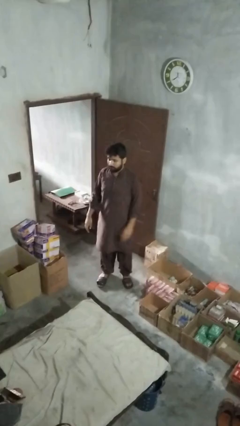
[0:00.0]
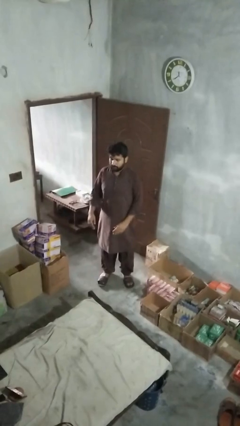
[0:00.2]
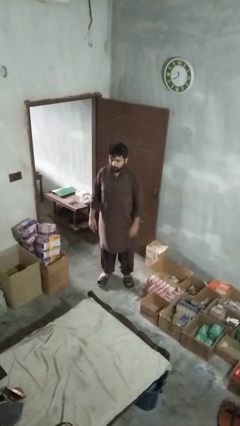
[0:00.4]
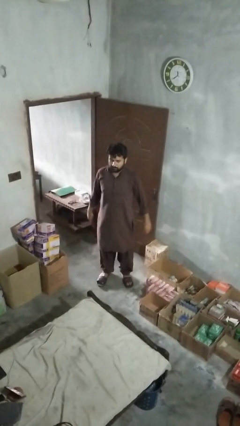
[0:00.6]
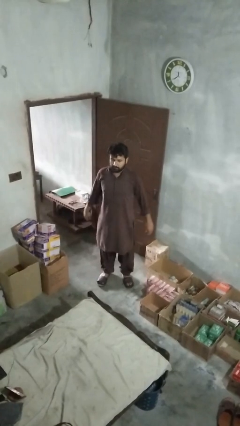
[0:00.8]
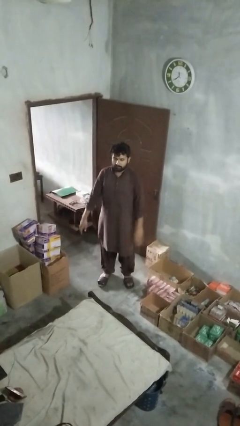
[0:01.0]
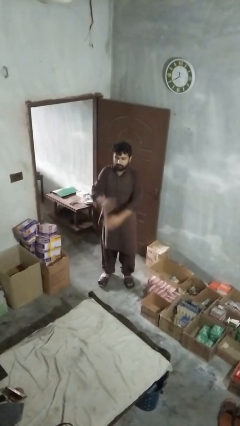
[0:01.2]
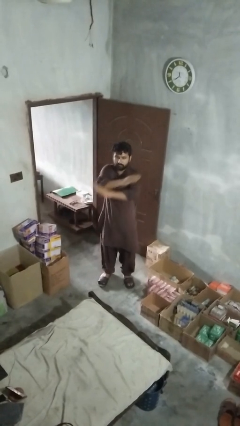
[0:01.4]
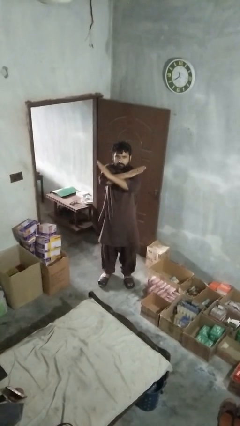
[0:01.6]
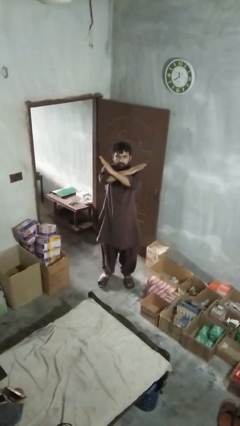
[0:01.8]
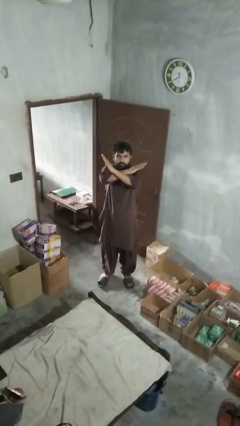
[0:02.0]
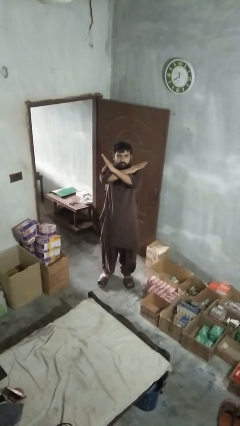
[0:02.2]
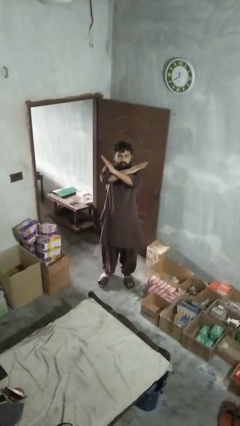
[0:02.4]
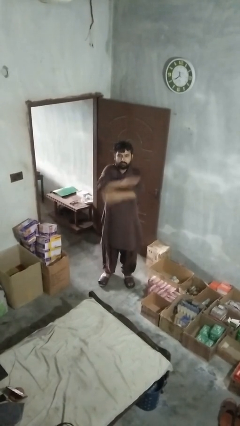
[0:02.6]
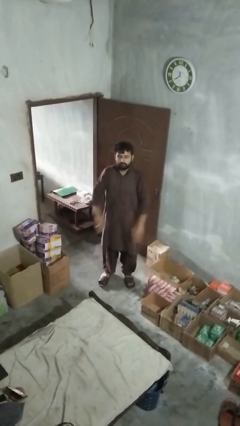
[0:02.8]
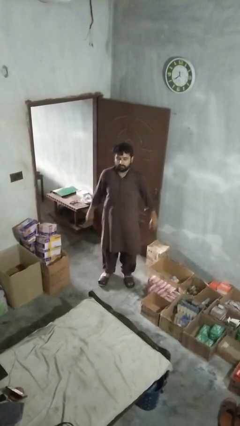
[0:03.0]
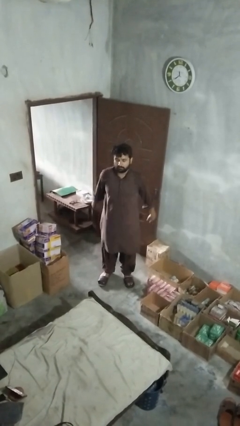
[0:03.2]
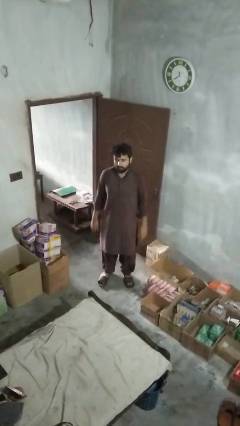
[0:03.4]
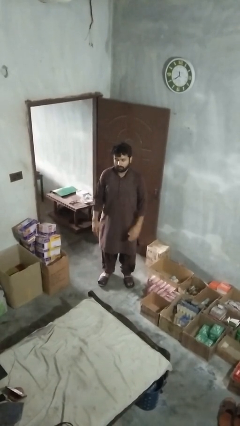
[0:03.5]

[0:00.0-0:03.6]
person gestures arms x

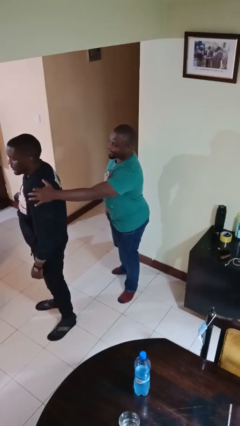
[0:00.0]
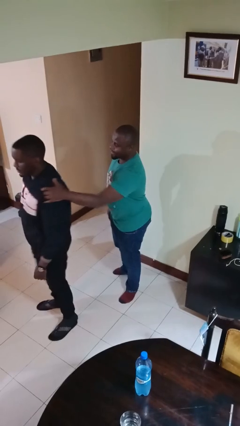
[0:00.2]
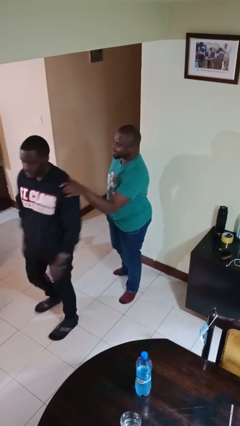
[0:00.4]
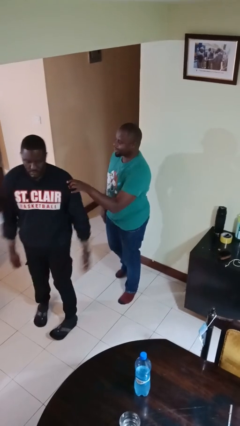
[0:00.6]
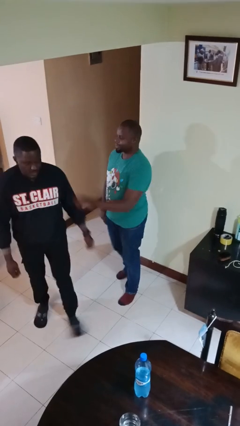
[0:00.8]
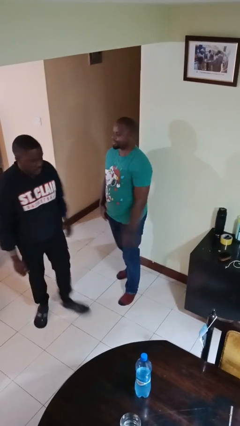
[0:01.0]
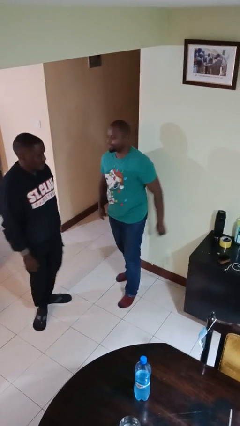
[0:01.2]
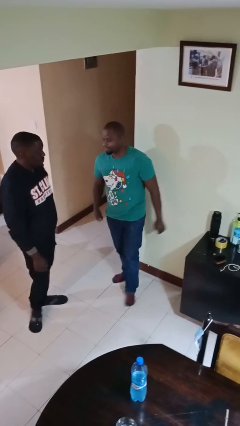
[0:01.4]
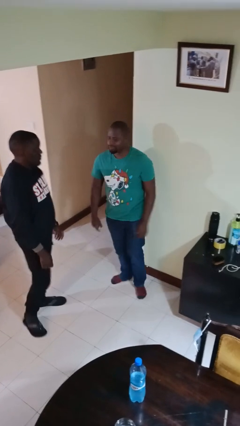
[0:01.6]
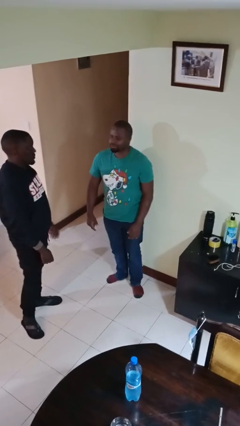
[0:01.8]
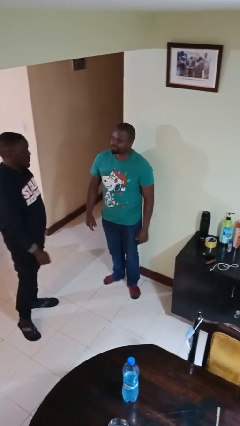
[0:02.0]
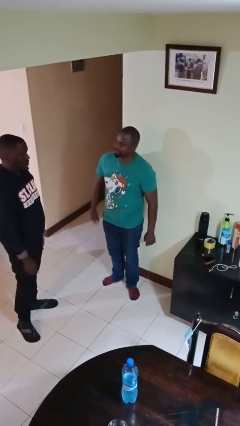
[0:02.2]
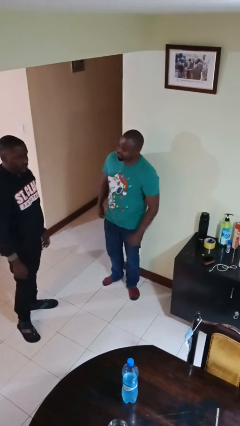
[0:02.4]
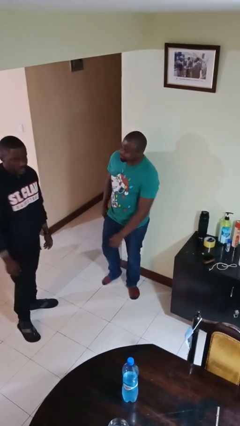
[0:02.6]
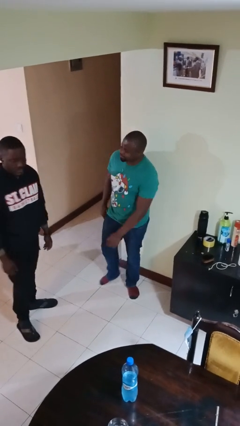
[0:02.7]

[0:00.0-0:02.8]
person spins person around

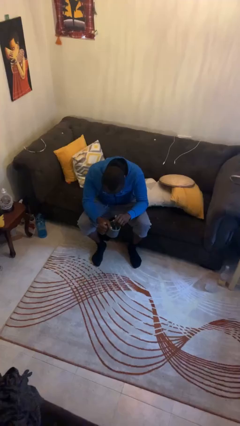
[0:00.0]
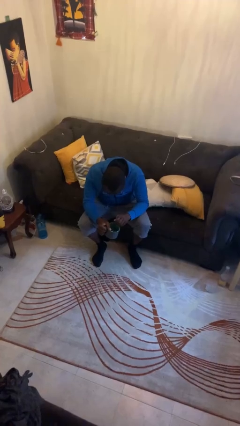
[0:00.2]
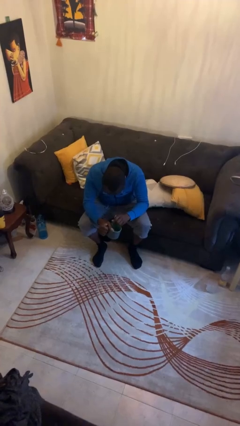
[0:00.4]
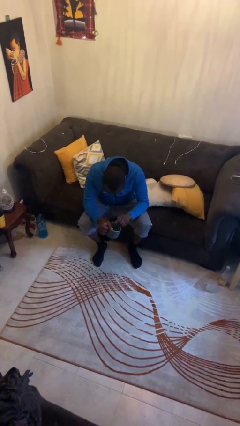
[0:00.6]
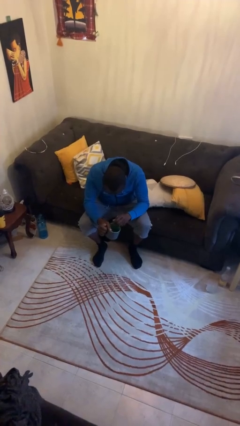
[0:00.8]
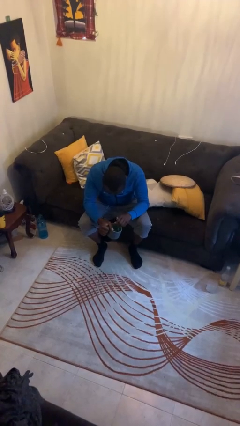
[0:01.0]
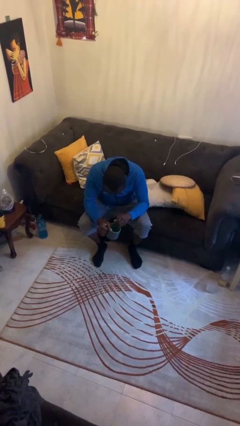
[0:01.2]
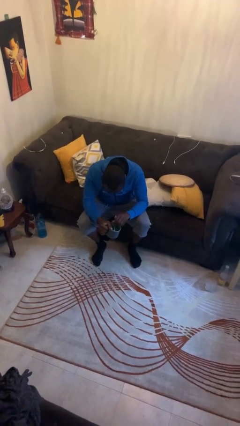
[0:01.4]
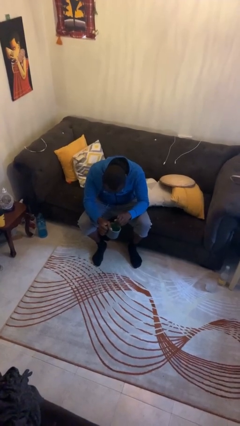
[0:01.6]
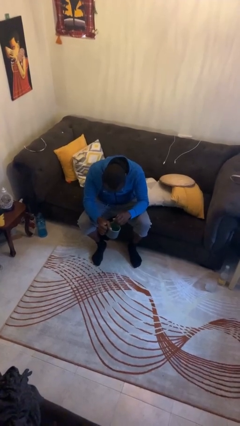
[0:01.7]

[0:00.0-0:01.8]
person stirs mug

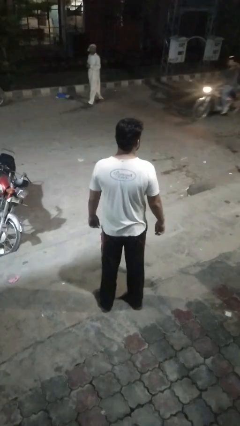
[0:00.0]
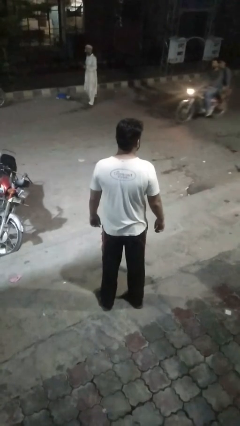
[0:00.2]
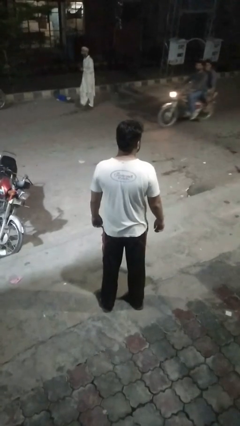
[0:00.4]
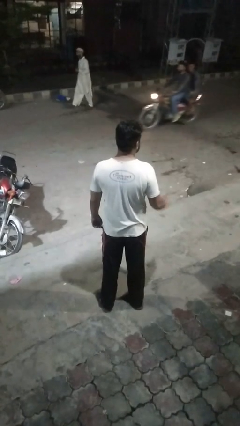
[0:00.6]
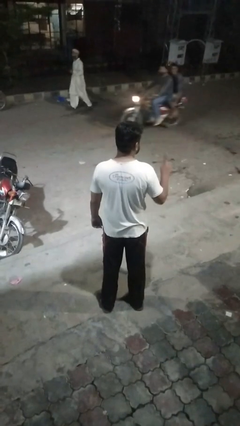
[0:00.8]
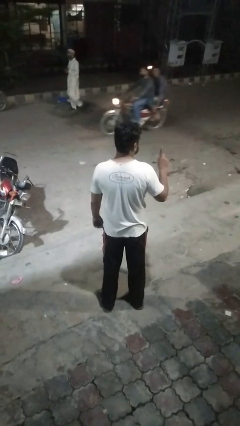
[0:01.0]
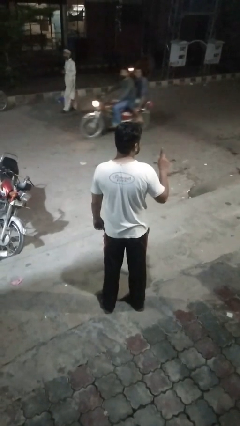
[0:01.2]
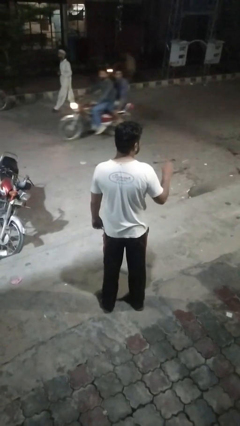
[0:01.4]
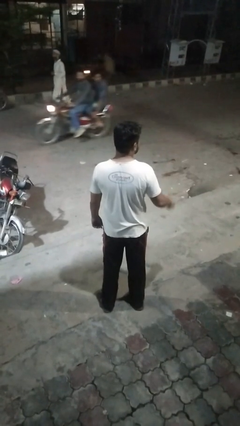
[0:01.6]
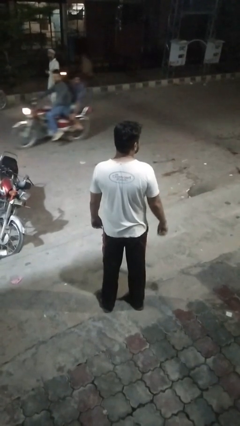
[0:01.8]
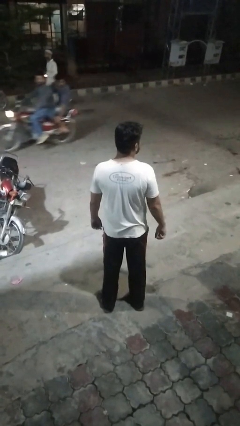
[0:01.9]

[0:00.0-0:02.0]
person gestures number one

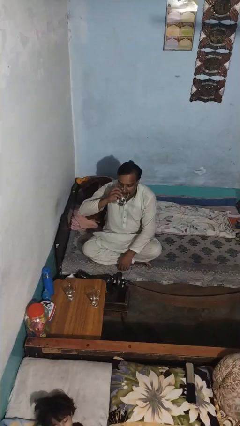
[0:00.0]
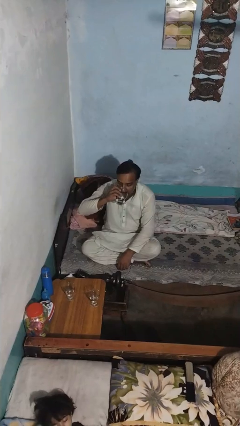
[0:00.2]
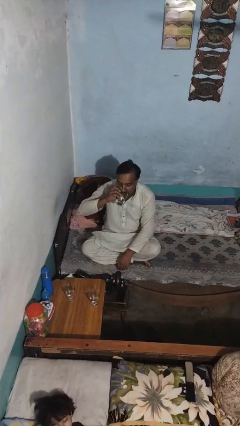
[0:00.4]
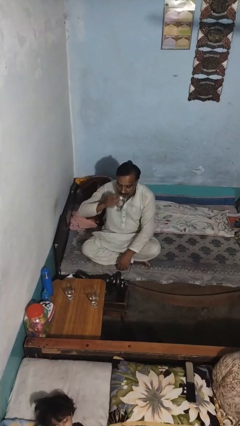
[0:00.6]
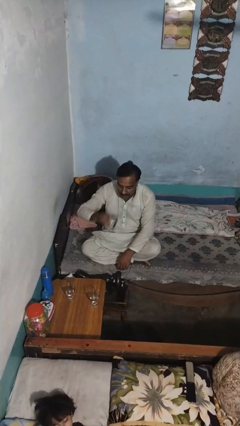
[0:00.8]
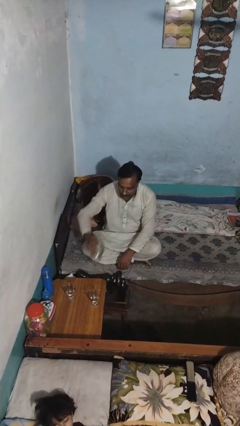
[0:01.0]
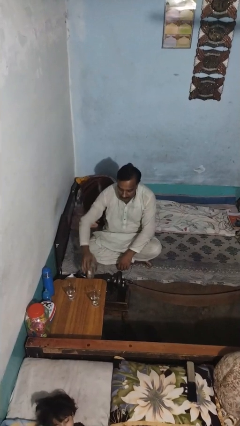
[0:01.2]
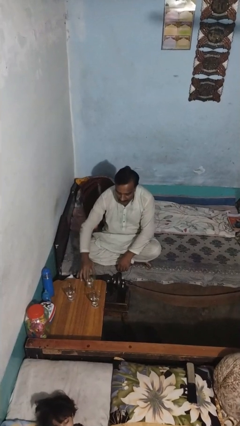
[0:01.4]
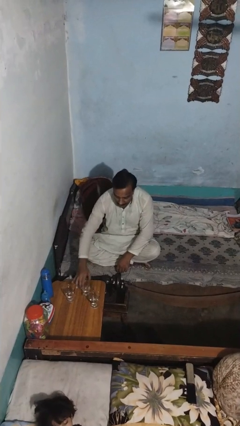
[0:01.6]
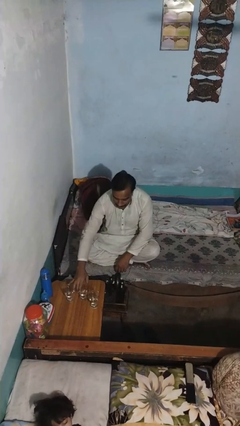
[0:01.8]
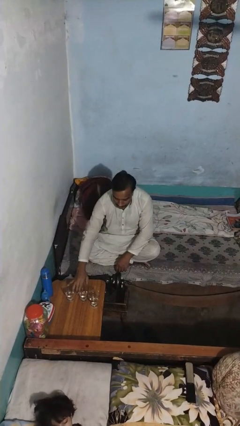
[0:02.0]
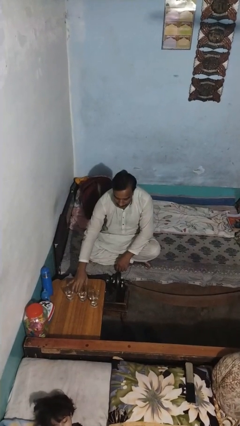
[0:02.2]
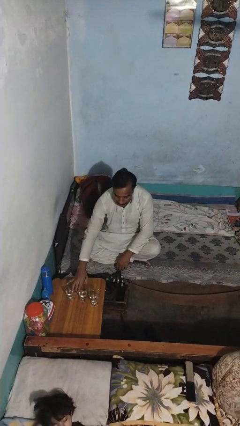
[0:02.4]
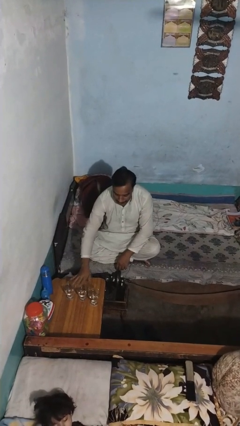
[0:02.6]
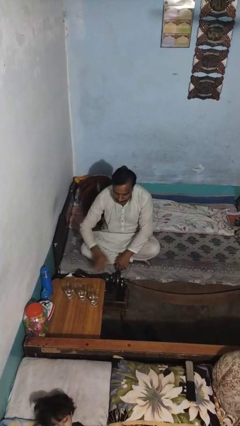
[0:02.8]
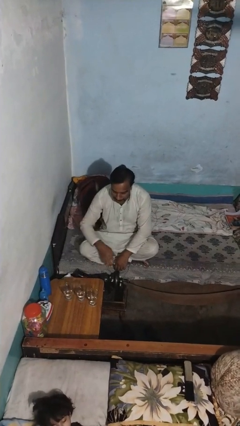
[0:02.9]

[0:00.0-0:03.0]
person puts down object on table

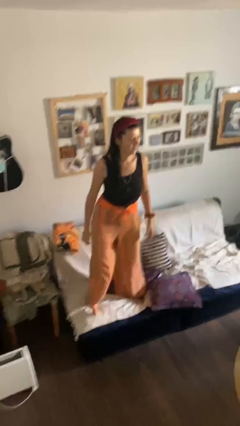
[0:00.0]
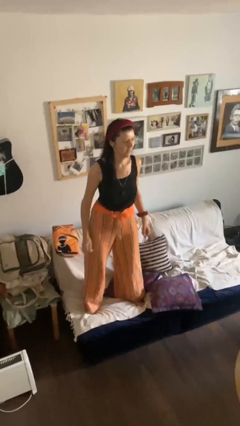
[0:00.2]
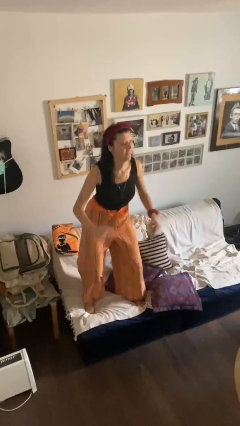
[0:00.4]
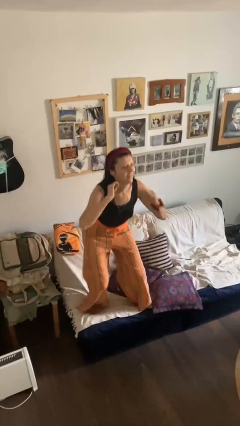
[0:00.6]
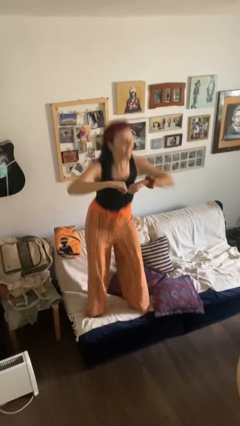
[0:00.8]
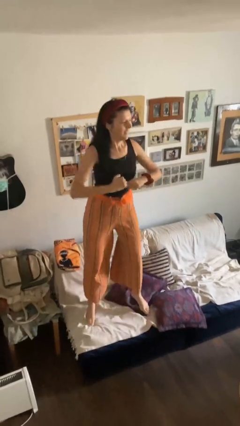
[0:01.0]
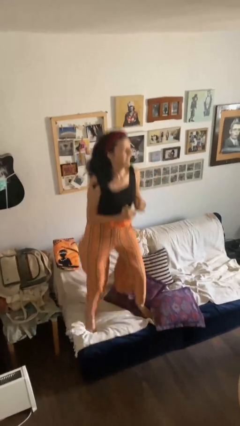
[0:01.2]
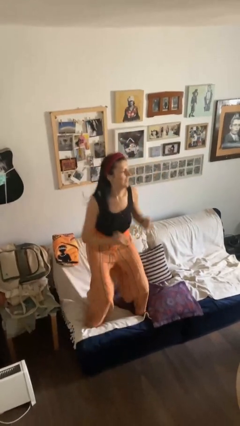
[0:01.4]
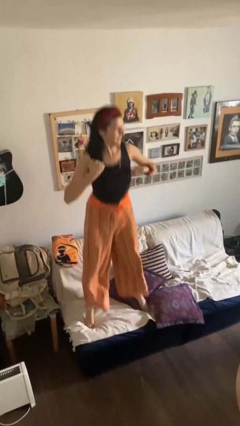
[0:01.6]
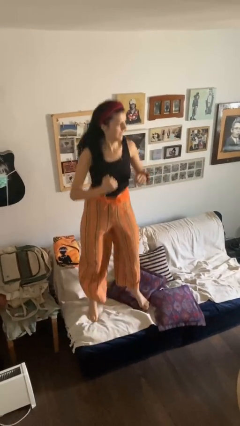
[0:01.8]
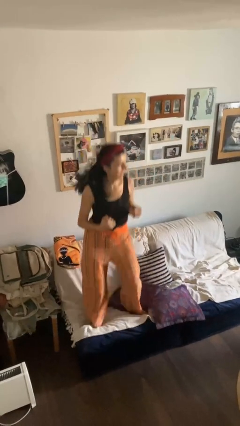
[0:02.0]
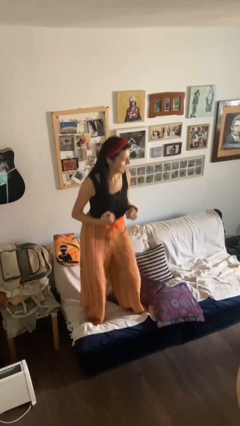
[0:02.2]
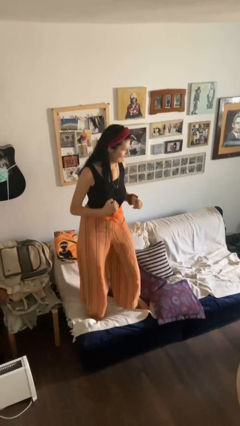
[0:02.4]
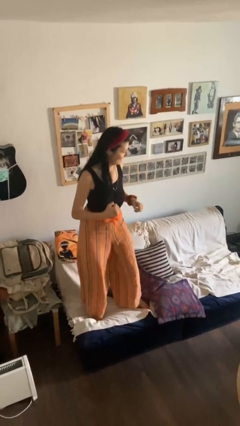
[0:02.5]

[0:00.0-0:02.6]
person jumps on couch

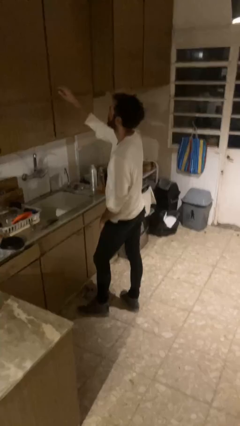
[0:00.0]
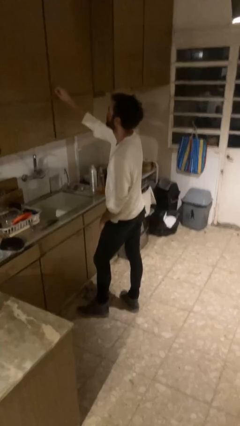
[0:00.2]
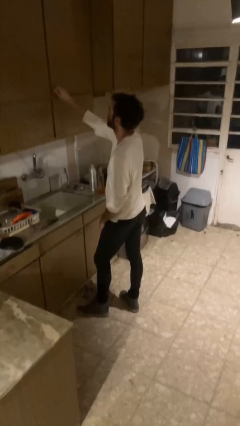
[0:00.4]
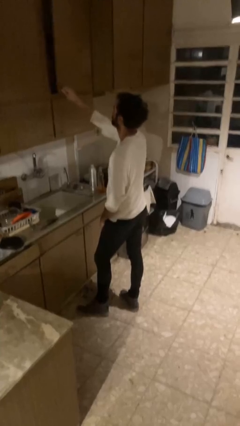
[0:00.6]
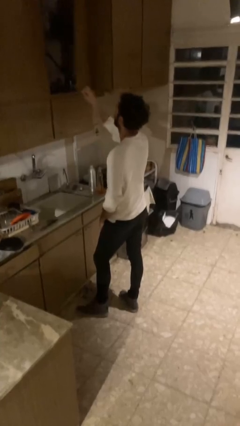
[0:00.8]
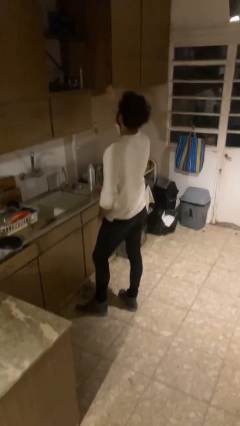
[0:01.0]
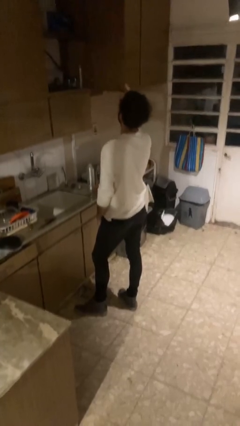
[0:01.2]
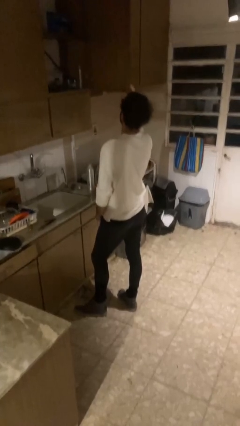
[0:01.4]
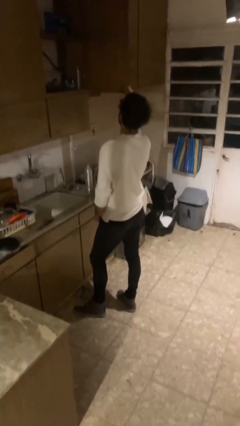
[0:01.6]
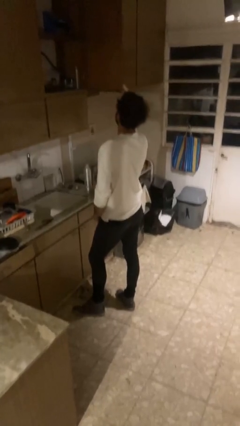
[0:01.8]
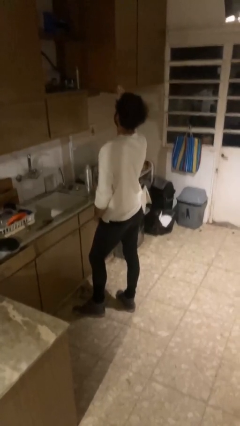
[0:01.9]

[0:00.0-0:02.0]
person closes cabinet
